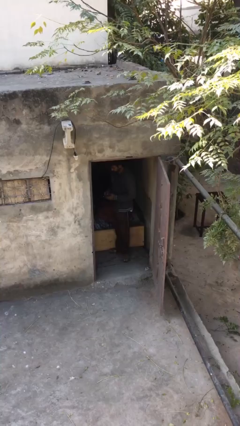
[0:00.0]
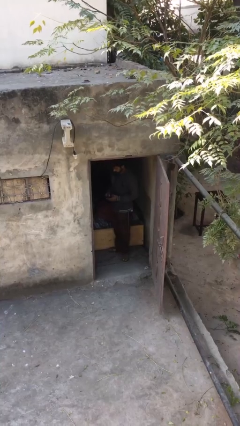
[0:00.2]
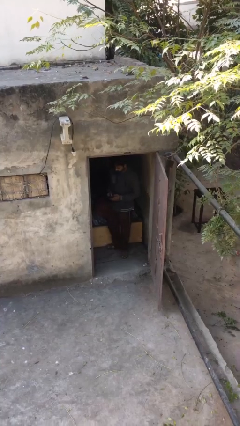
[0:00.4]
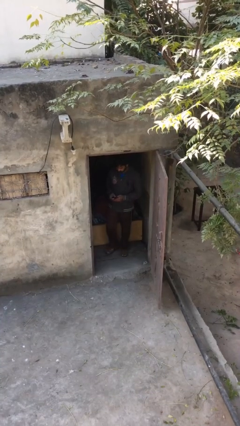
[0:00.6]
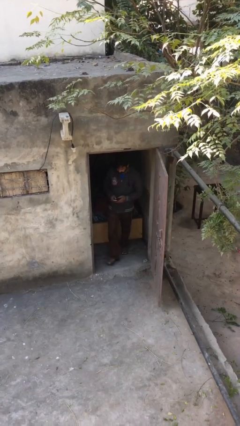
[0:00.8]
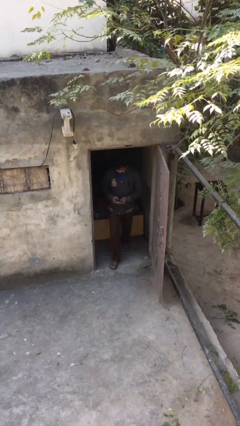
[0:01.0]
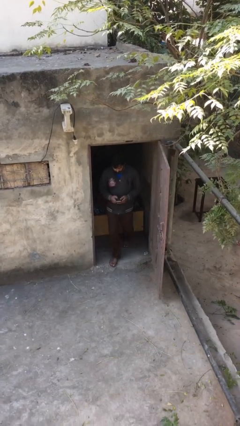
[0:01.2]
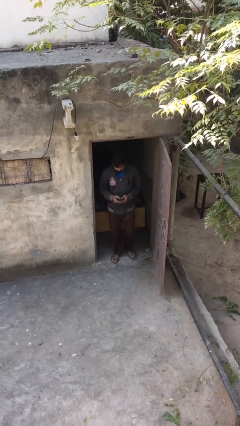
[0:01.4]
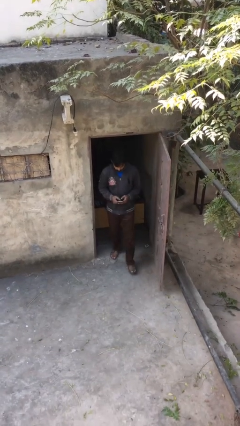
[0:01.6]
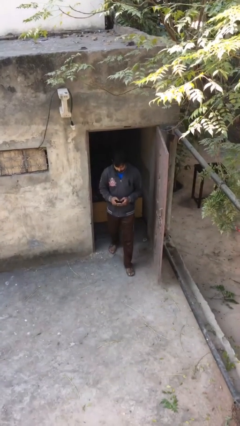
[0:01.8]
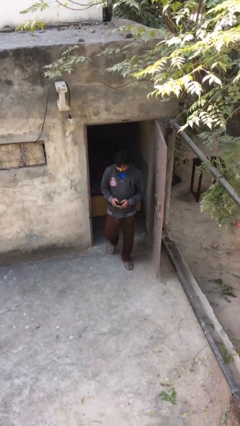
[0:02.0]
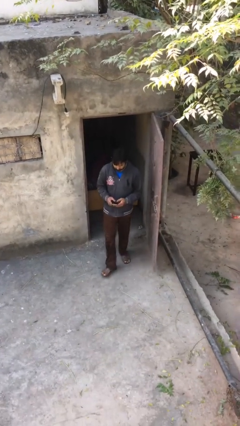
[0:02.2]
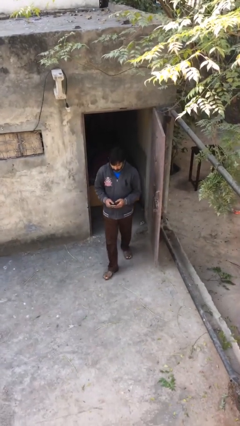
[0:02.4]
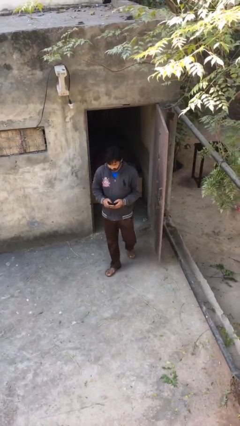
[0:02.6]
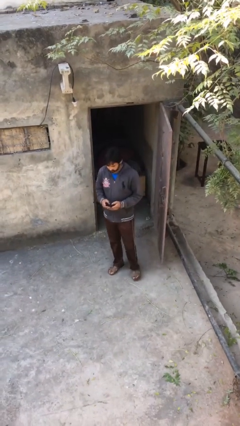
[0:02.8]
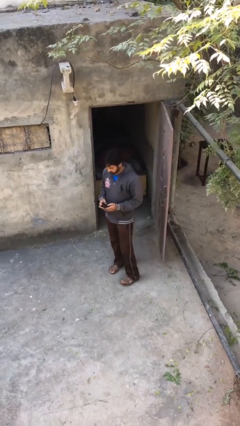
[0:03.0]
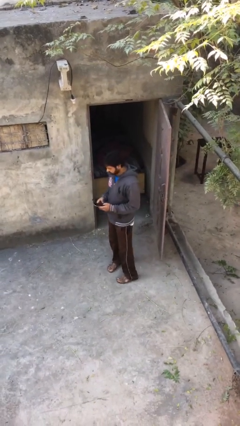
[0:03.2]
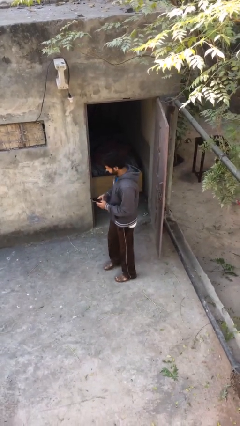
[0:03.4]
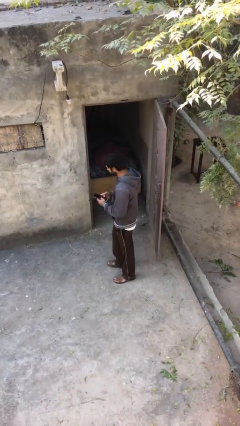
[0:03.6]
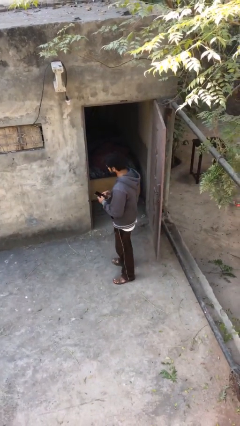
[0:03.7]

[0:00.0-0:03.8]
person enters scene through structure

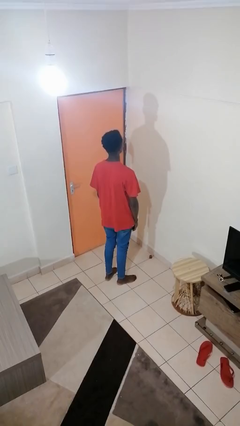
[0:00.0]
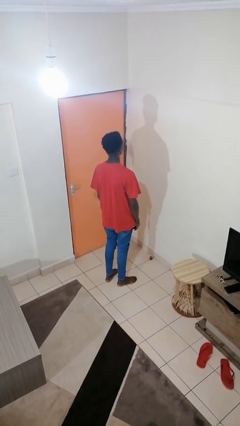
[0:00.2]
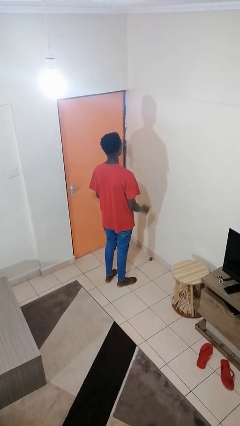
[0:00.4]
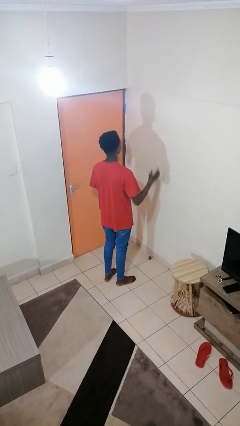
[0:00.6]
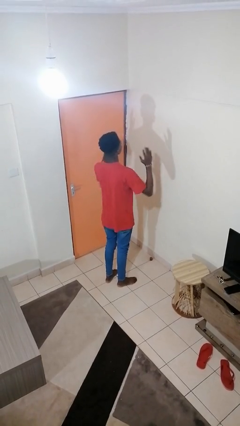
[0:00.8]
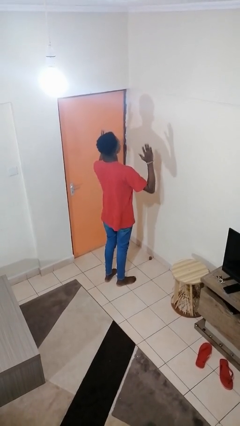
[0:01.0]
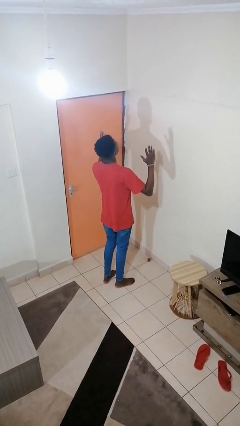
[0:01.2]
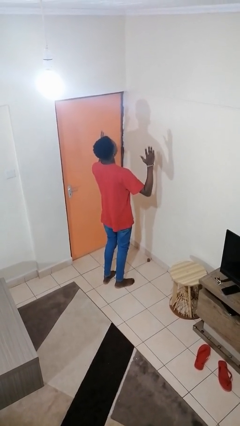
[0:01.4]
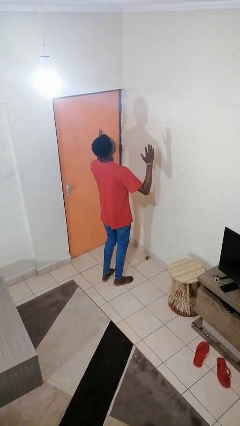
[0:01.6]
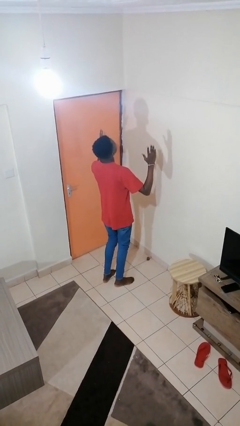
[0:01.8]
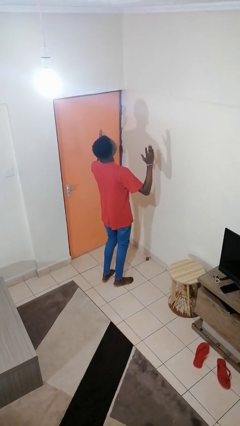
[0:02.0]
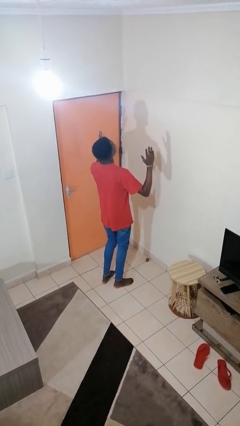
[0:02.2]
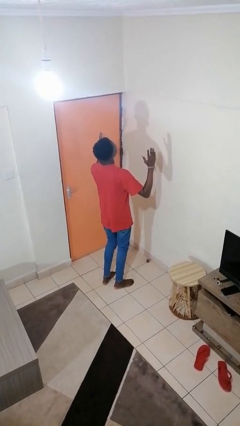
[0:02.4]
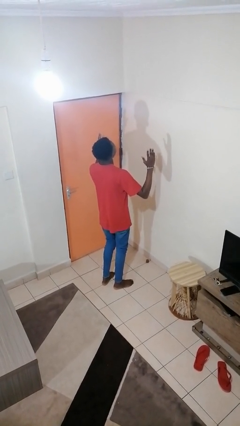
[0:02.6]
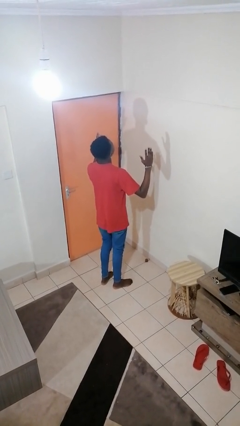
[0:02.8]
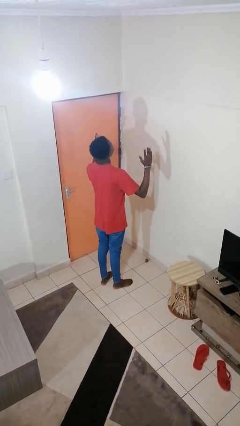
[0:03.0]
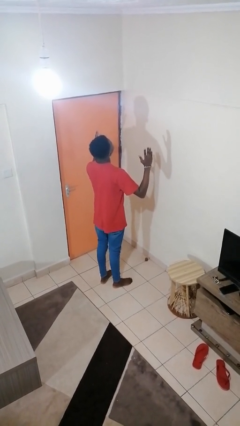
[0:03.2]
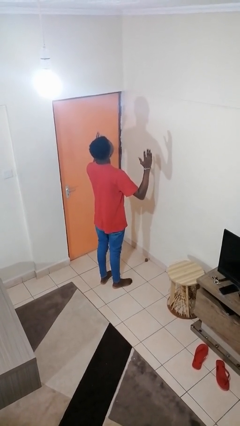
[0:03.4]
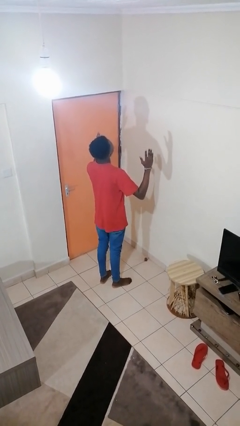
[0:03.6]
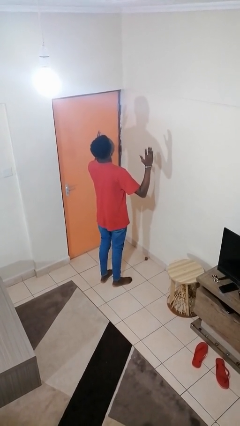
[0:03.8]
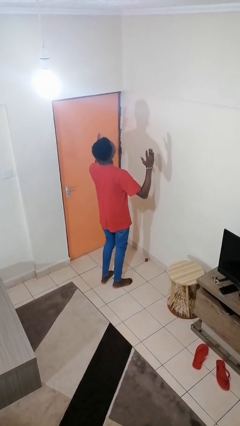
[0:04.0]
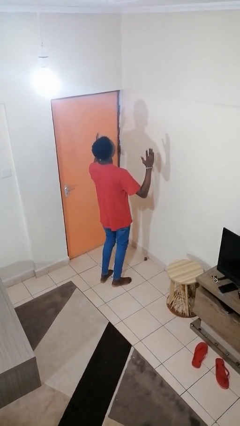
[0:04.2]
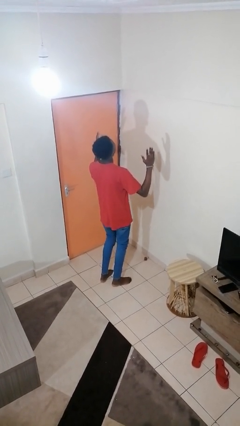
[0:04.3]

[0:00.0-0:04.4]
person prays

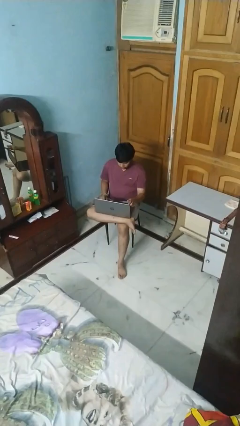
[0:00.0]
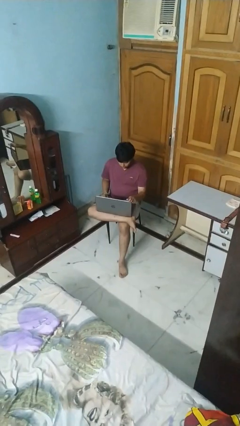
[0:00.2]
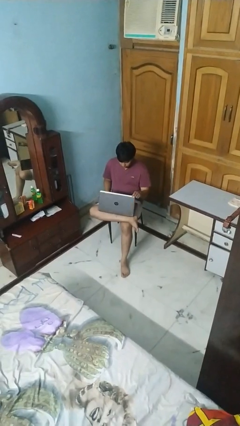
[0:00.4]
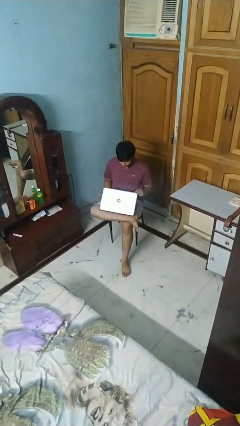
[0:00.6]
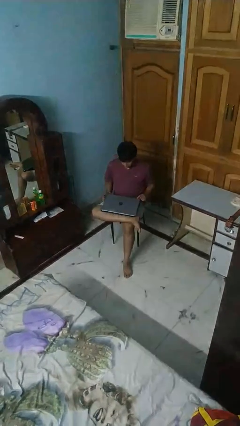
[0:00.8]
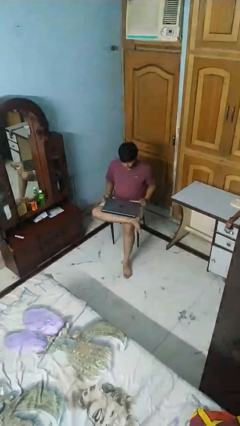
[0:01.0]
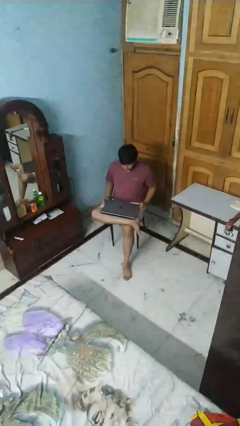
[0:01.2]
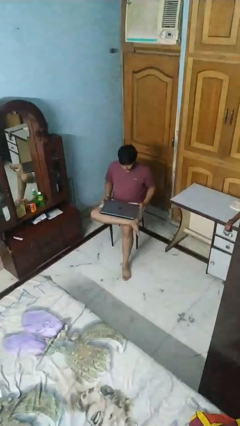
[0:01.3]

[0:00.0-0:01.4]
person closes laptop

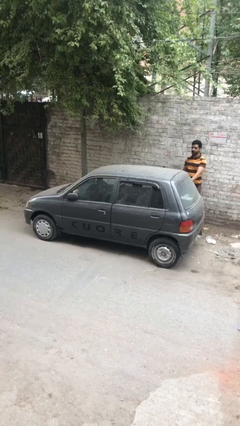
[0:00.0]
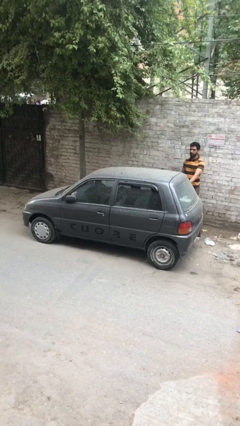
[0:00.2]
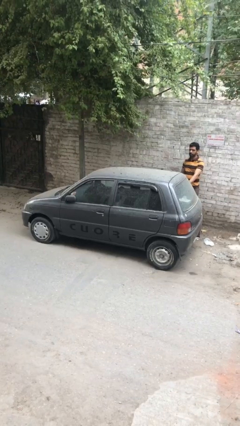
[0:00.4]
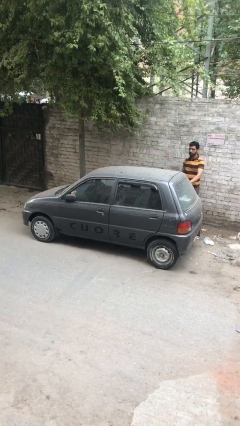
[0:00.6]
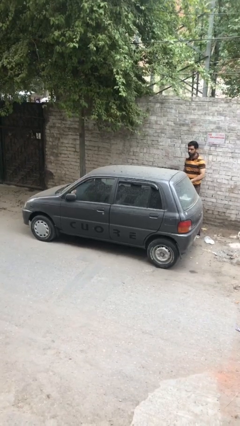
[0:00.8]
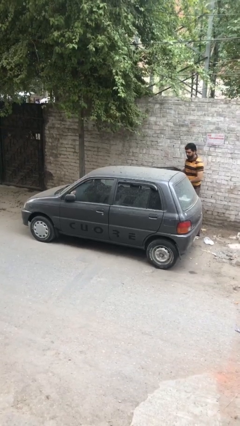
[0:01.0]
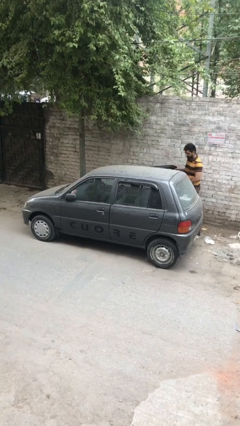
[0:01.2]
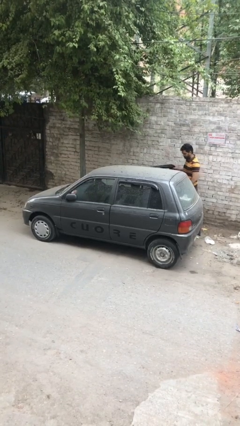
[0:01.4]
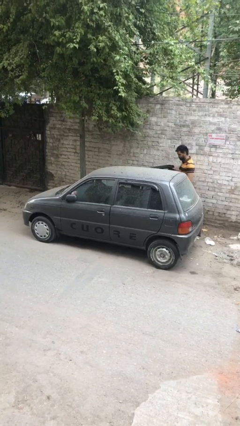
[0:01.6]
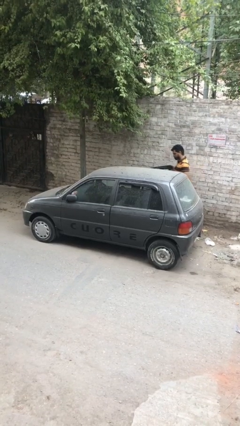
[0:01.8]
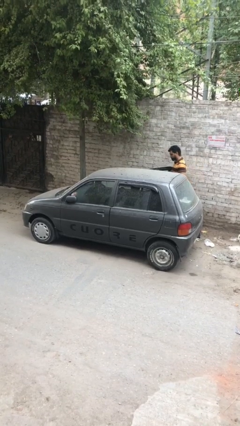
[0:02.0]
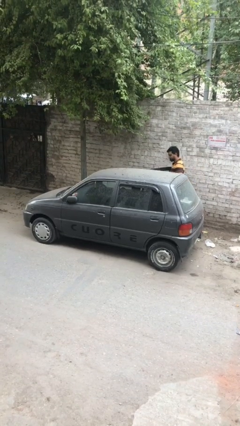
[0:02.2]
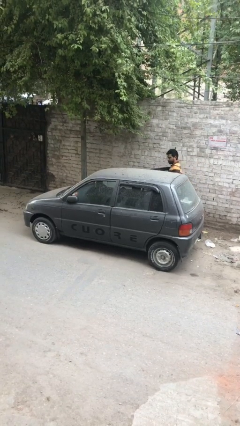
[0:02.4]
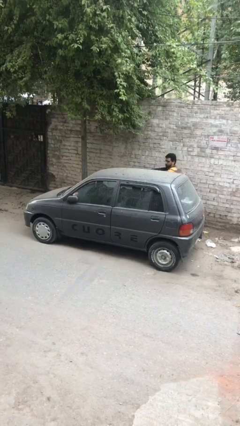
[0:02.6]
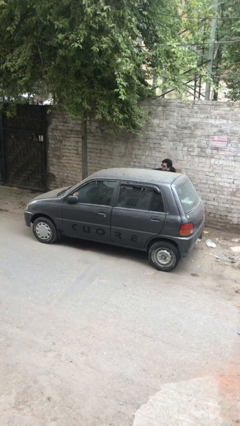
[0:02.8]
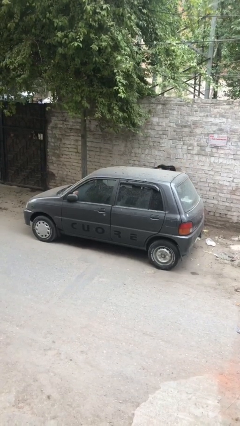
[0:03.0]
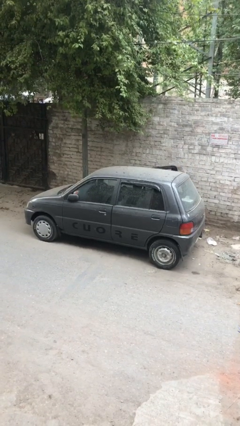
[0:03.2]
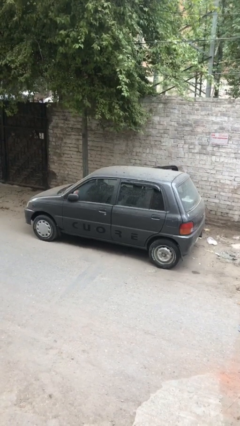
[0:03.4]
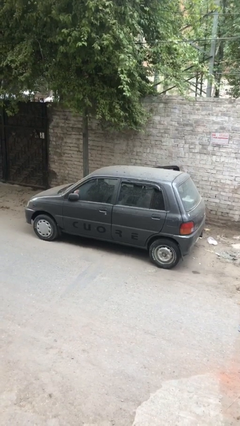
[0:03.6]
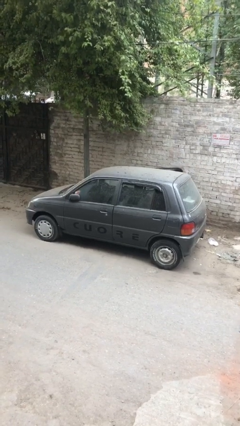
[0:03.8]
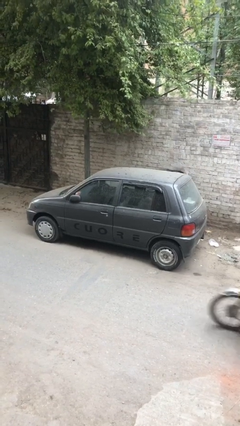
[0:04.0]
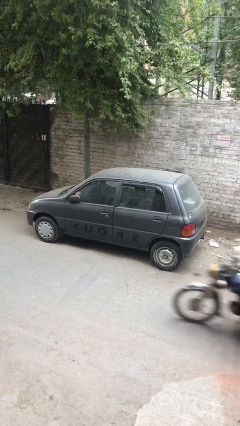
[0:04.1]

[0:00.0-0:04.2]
car picks up person

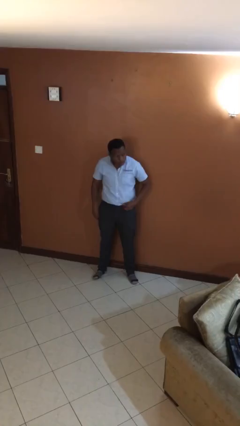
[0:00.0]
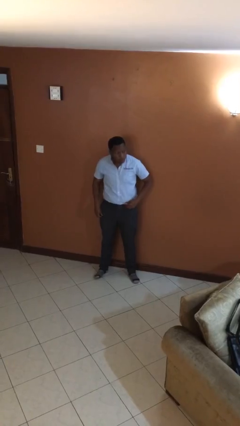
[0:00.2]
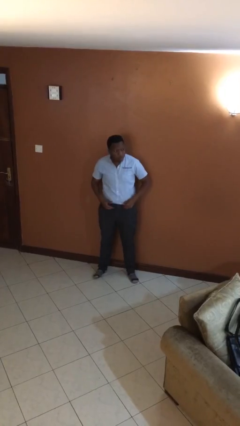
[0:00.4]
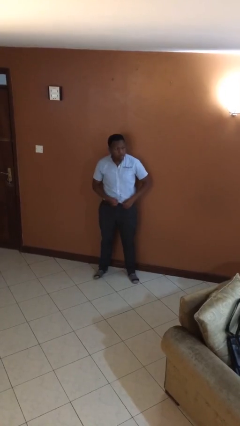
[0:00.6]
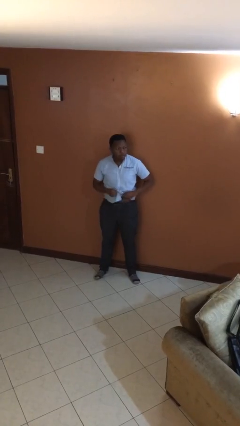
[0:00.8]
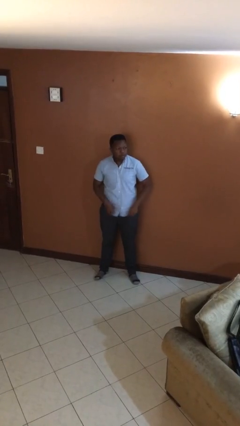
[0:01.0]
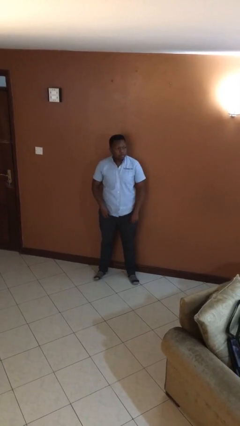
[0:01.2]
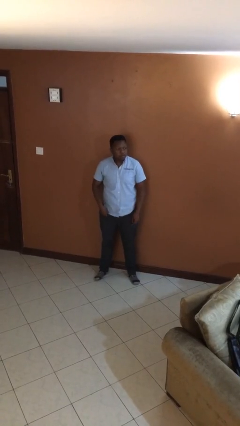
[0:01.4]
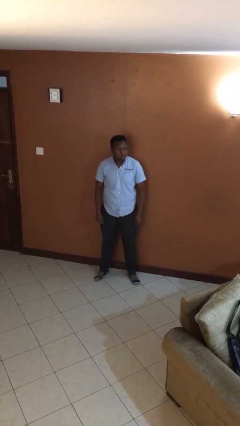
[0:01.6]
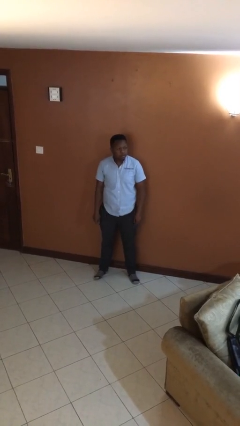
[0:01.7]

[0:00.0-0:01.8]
person untucks shirt

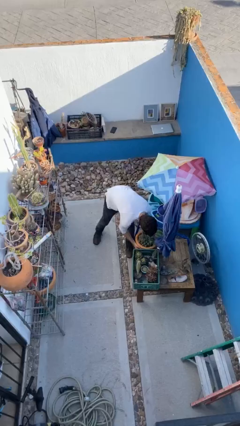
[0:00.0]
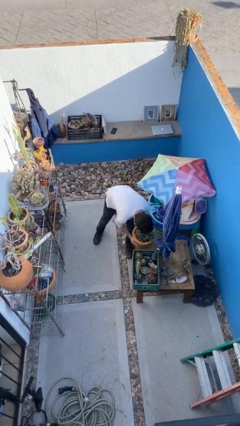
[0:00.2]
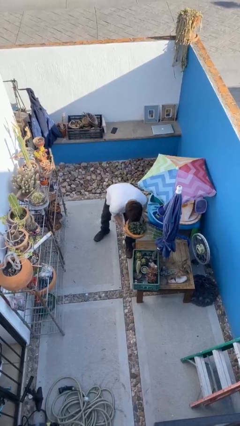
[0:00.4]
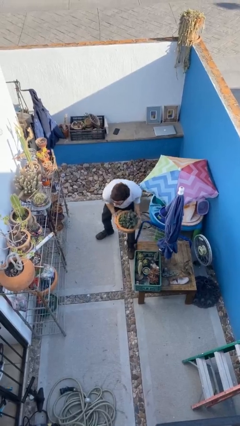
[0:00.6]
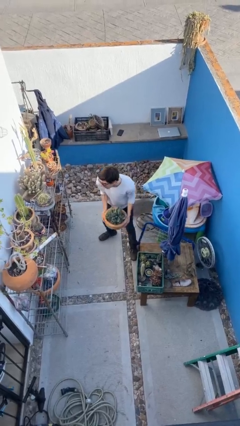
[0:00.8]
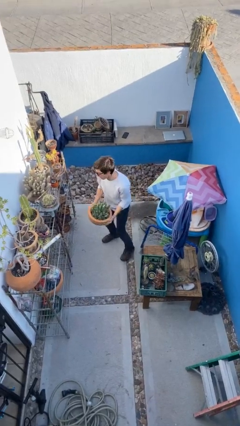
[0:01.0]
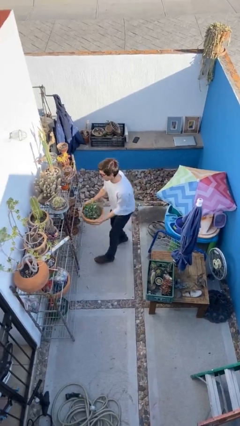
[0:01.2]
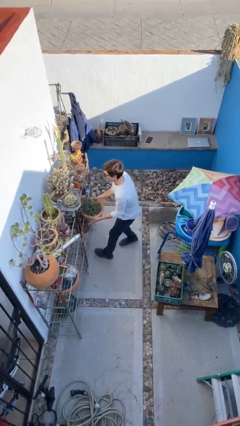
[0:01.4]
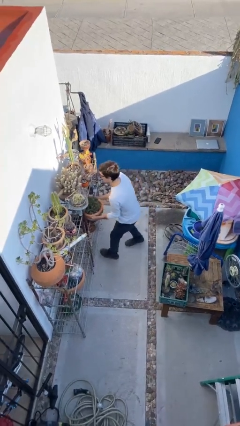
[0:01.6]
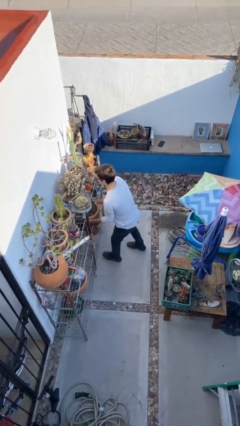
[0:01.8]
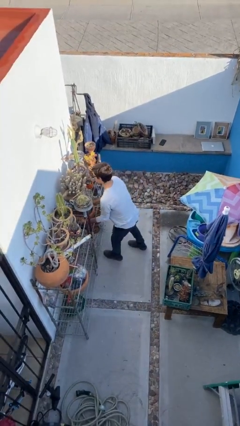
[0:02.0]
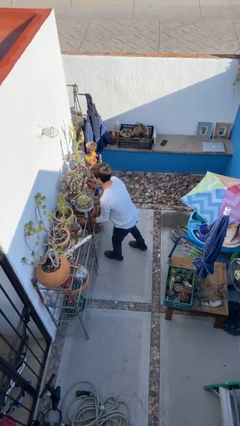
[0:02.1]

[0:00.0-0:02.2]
person picks up object from table
